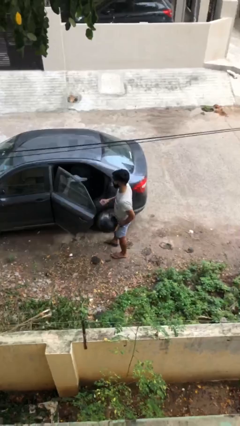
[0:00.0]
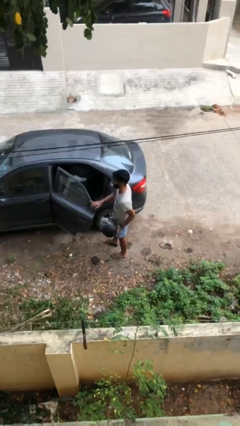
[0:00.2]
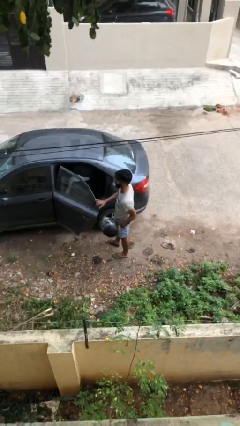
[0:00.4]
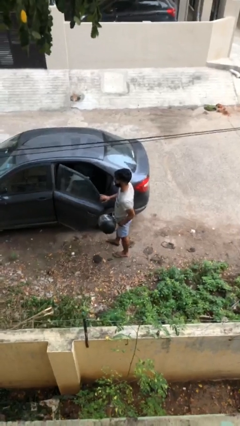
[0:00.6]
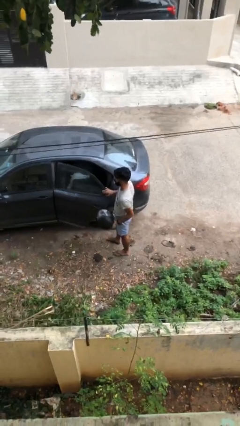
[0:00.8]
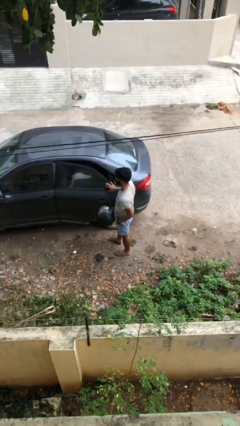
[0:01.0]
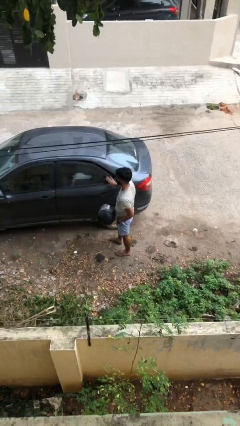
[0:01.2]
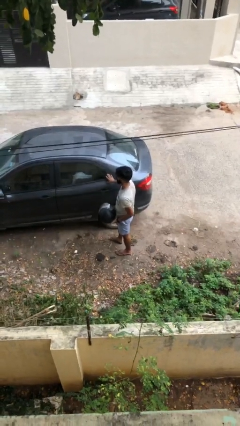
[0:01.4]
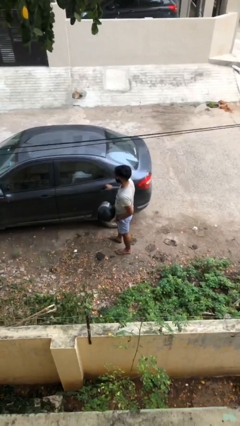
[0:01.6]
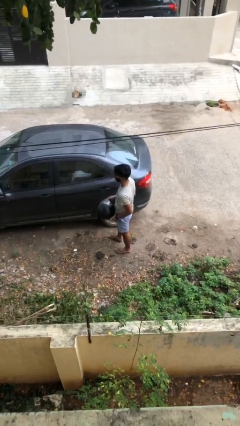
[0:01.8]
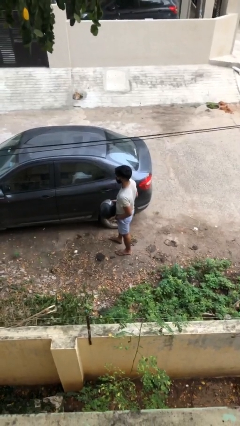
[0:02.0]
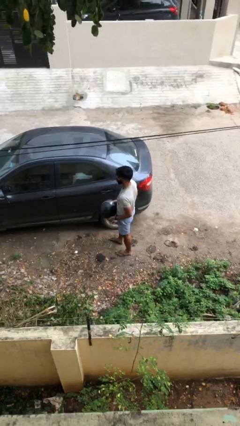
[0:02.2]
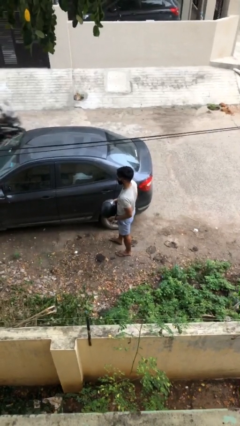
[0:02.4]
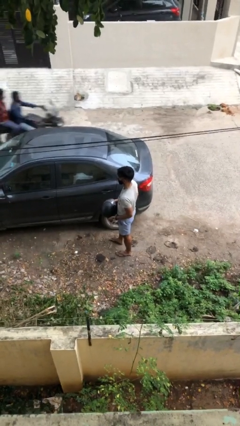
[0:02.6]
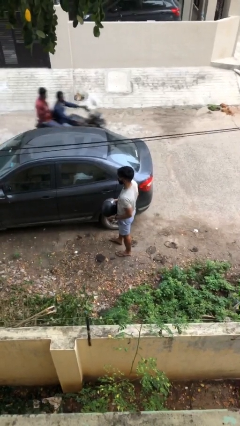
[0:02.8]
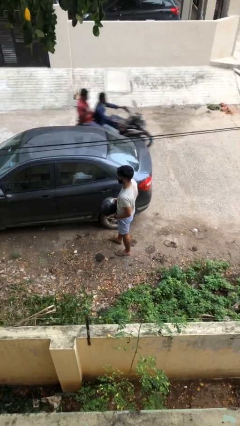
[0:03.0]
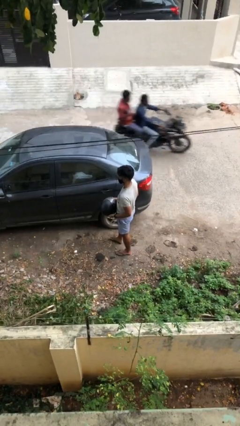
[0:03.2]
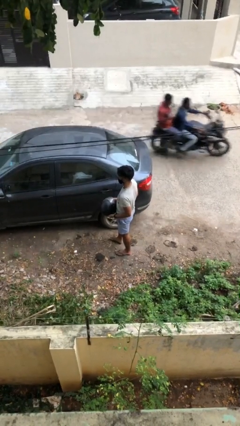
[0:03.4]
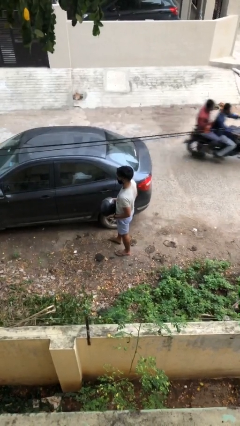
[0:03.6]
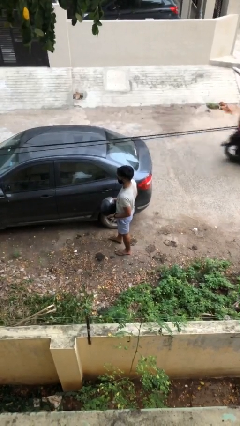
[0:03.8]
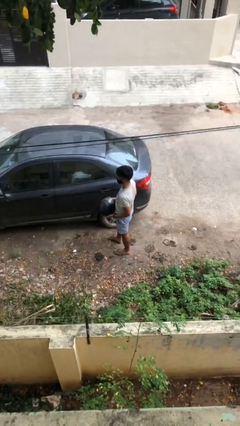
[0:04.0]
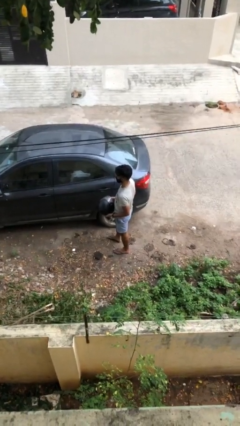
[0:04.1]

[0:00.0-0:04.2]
person closes car door

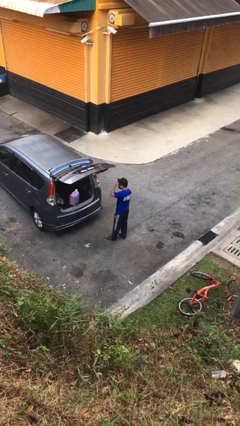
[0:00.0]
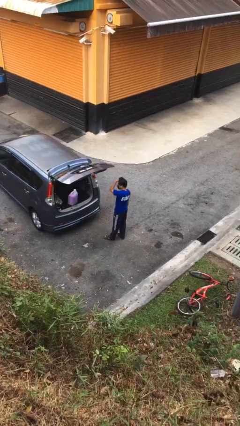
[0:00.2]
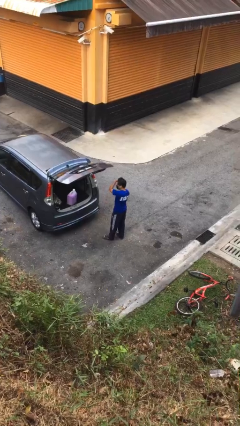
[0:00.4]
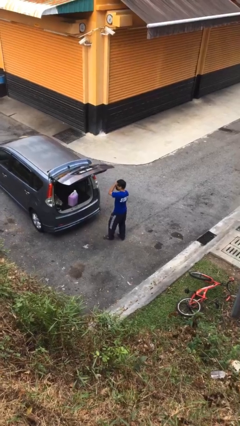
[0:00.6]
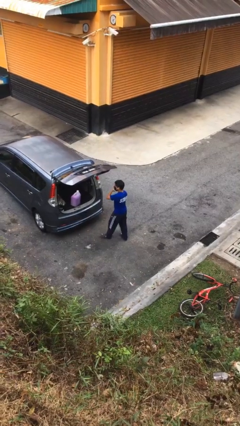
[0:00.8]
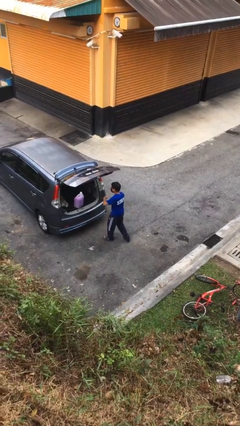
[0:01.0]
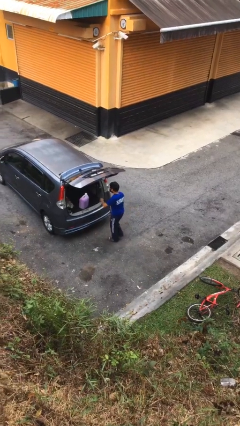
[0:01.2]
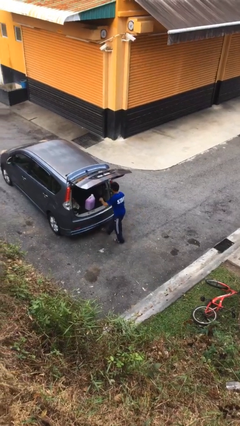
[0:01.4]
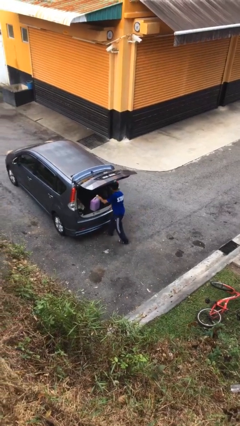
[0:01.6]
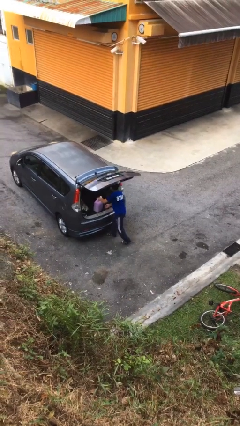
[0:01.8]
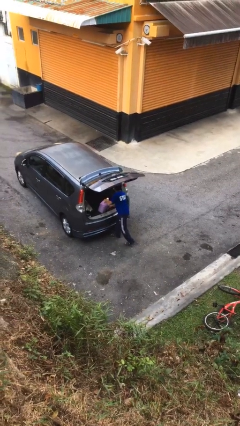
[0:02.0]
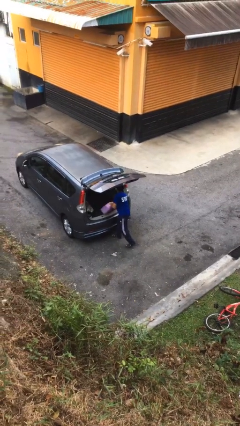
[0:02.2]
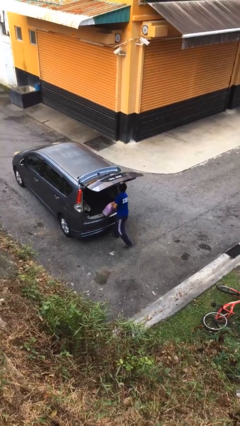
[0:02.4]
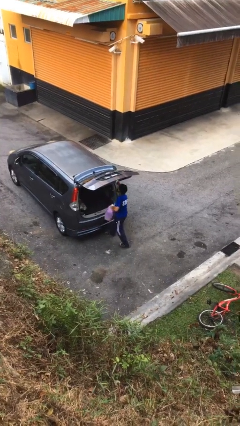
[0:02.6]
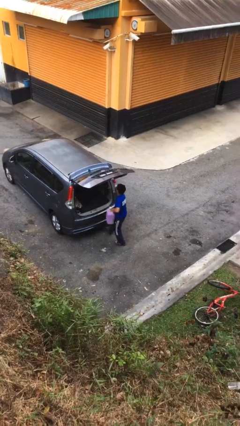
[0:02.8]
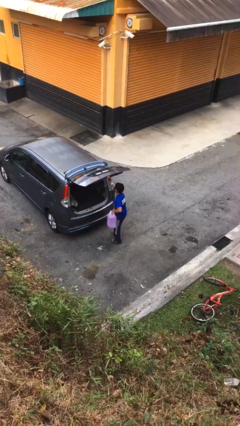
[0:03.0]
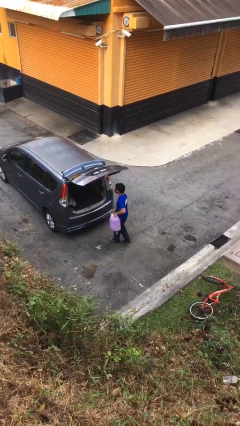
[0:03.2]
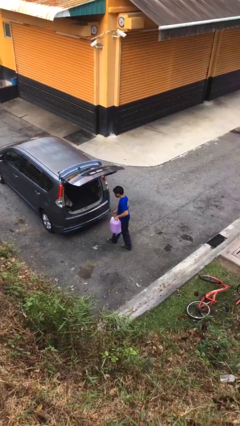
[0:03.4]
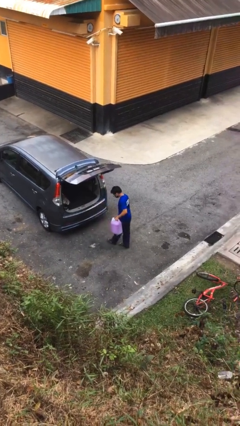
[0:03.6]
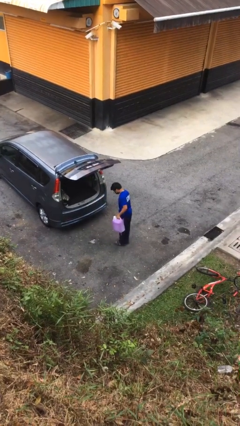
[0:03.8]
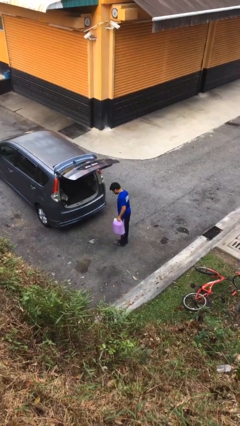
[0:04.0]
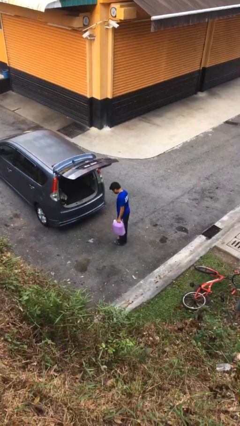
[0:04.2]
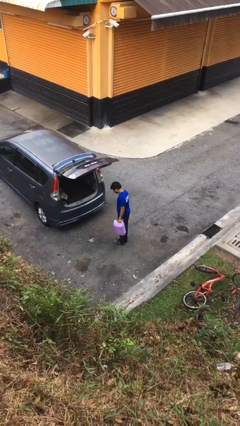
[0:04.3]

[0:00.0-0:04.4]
person unloads car

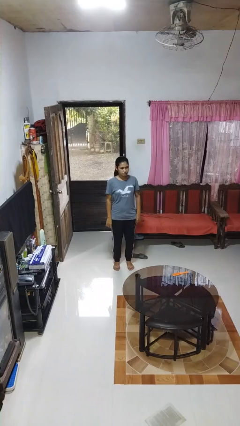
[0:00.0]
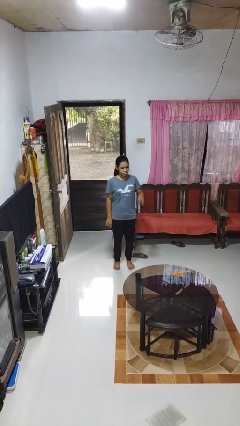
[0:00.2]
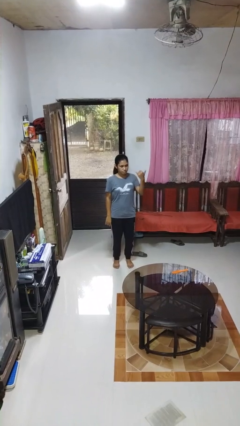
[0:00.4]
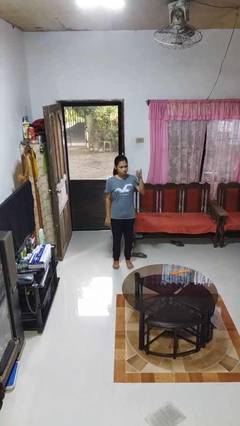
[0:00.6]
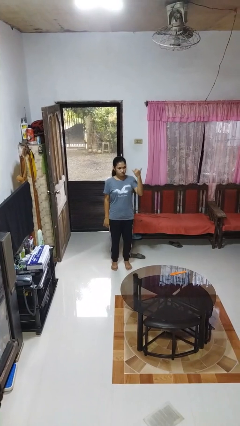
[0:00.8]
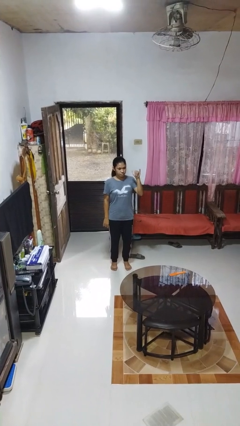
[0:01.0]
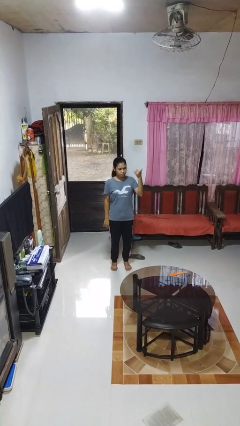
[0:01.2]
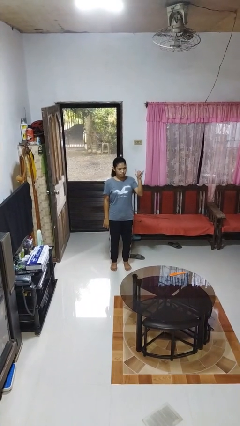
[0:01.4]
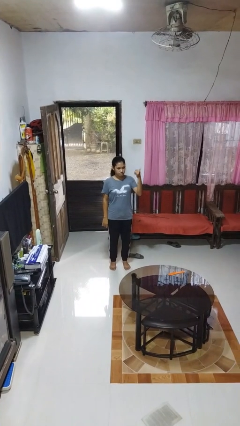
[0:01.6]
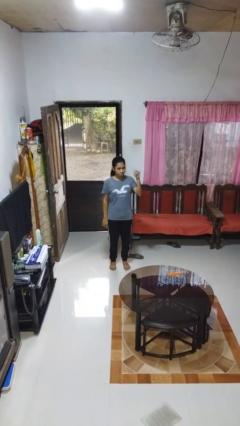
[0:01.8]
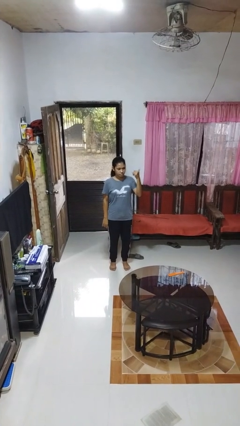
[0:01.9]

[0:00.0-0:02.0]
person gestures hang loose

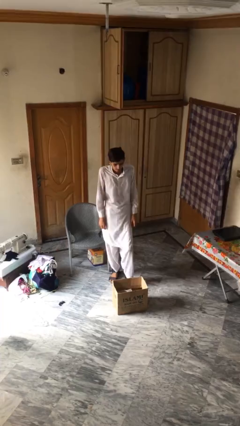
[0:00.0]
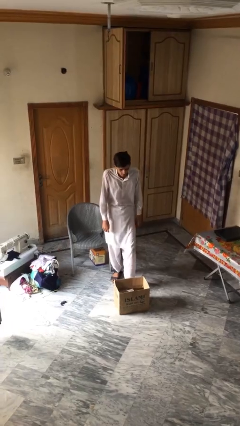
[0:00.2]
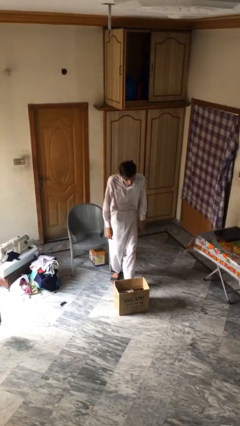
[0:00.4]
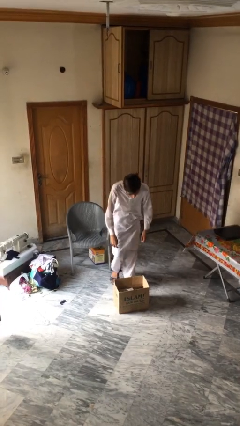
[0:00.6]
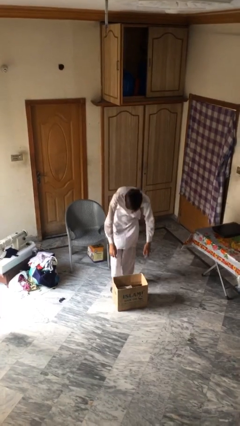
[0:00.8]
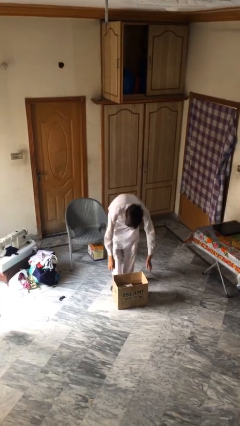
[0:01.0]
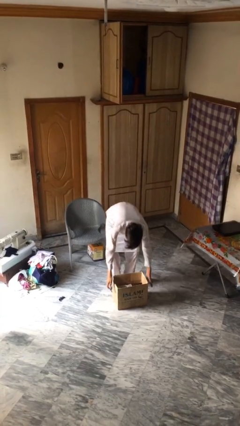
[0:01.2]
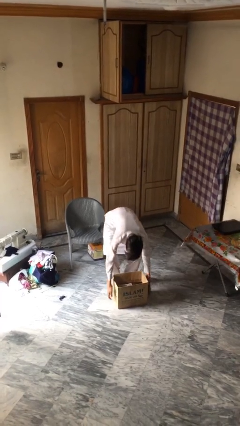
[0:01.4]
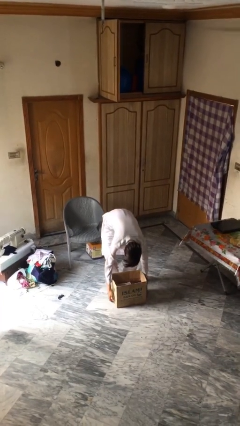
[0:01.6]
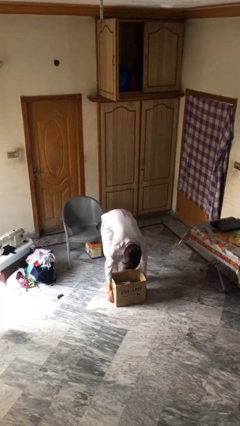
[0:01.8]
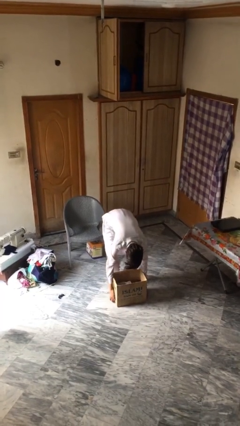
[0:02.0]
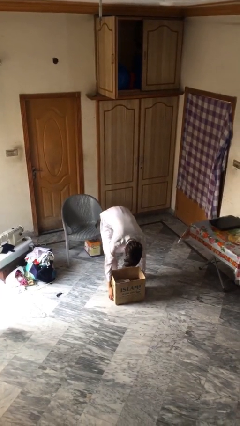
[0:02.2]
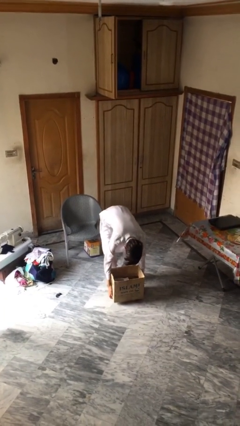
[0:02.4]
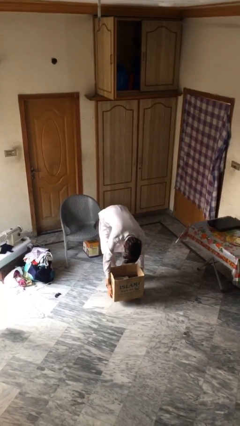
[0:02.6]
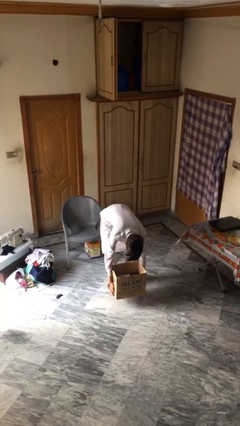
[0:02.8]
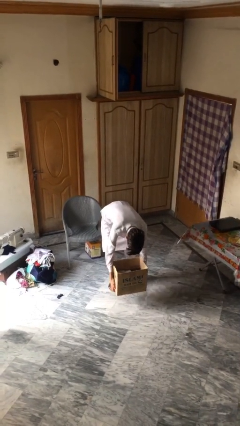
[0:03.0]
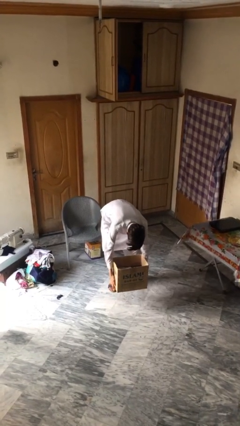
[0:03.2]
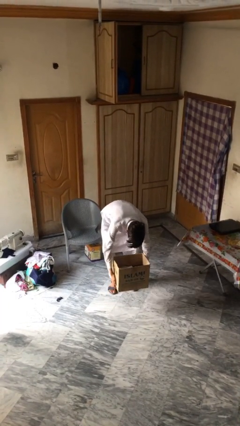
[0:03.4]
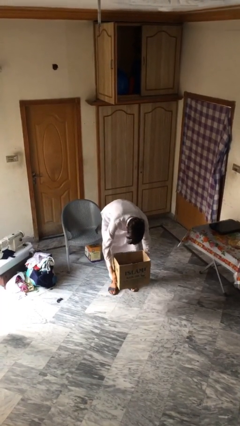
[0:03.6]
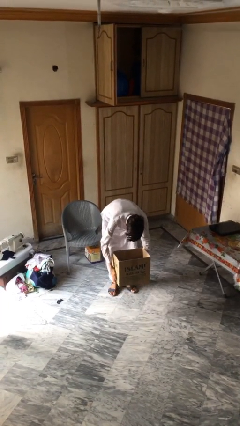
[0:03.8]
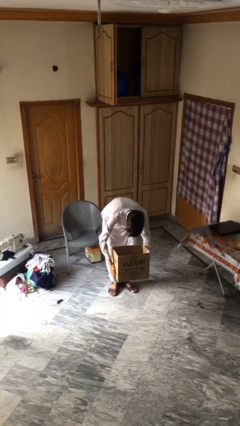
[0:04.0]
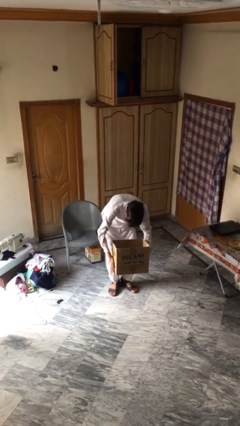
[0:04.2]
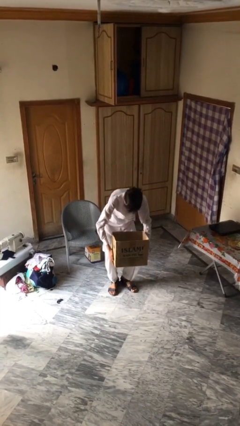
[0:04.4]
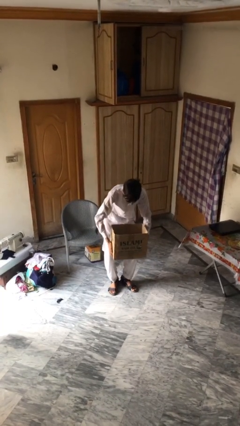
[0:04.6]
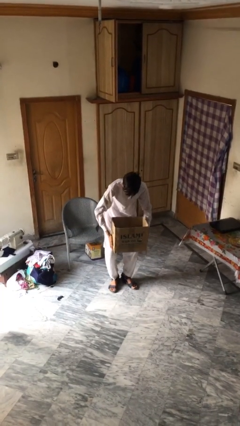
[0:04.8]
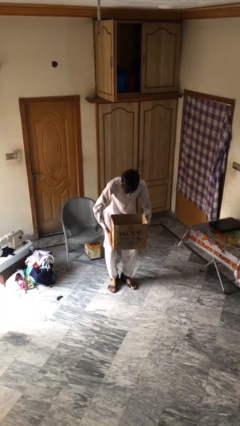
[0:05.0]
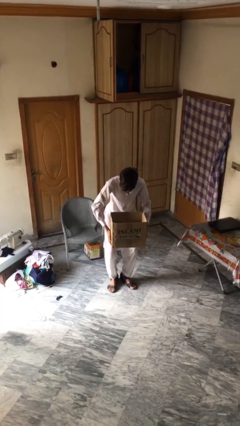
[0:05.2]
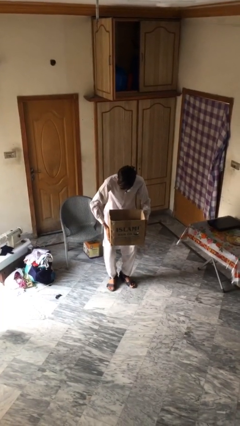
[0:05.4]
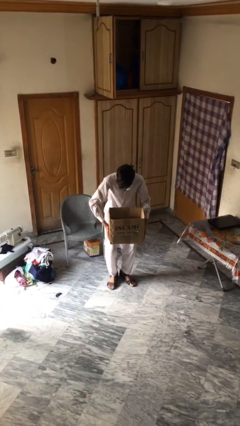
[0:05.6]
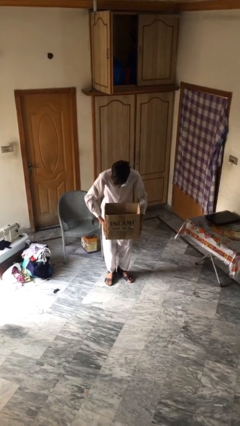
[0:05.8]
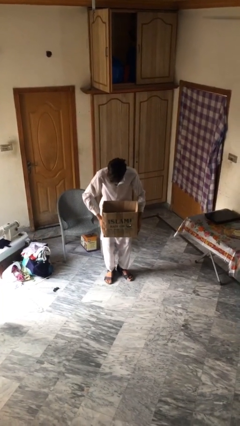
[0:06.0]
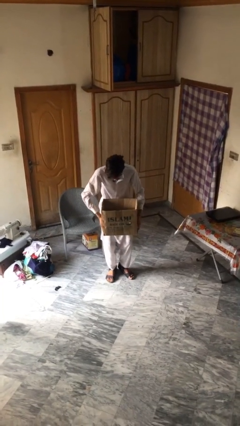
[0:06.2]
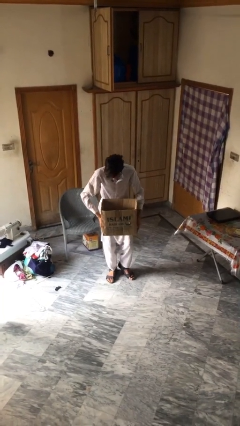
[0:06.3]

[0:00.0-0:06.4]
person picks up object from floor

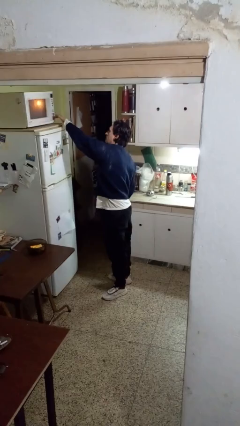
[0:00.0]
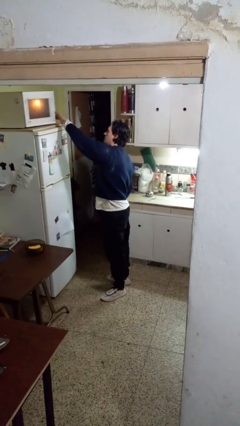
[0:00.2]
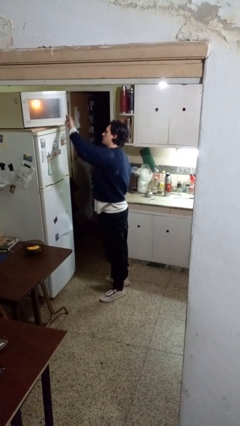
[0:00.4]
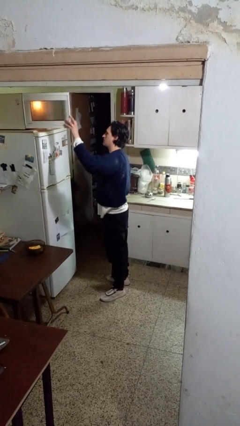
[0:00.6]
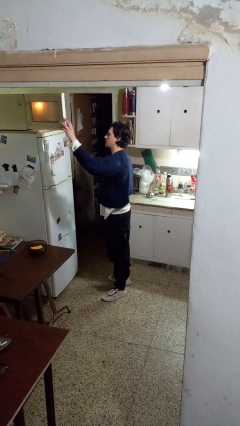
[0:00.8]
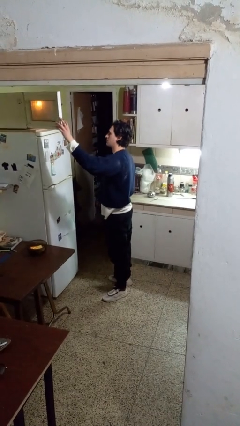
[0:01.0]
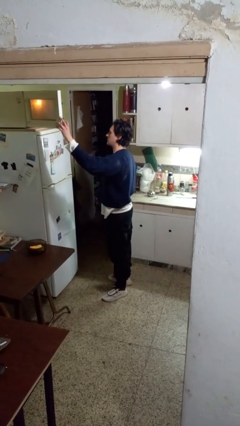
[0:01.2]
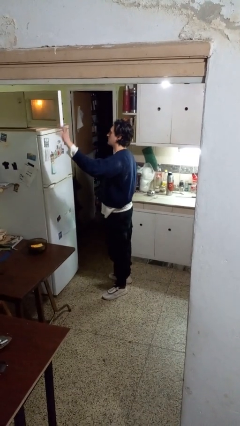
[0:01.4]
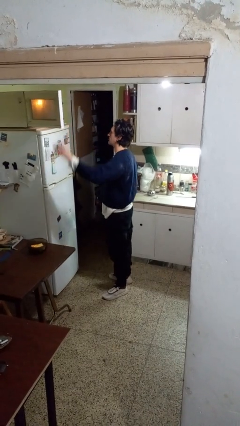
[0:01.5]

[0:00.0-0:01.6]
person opens microwave
